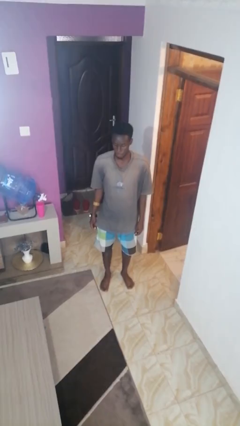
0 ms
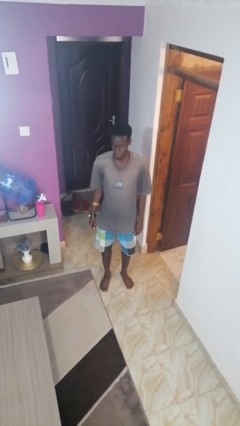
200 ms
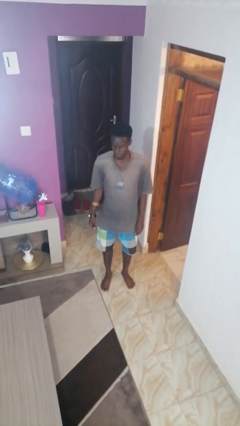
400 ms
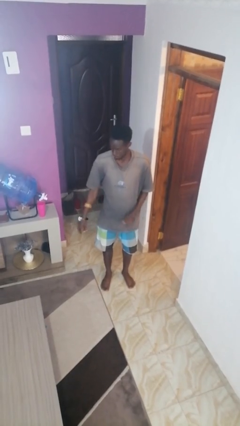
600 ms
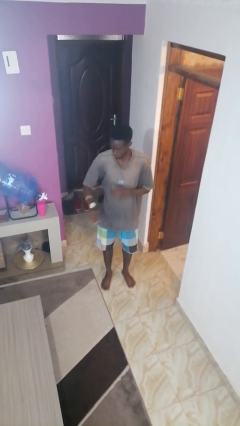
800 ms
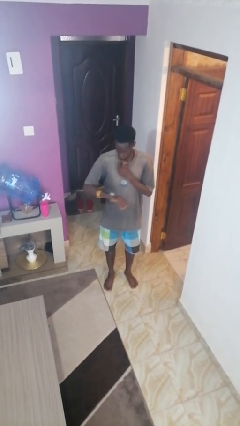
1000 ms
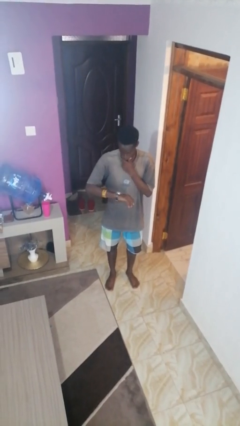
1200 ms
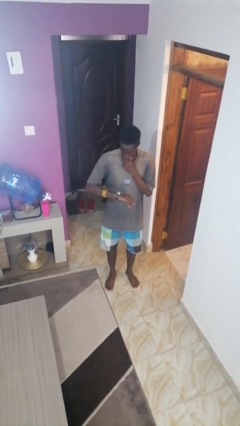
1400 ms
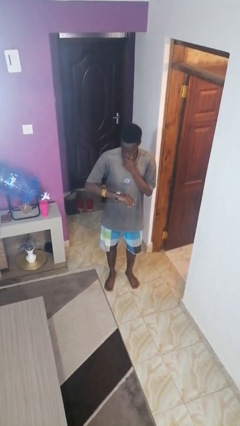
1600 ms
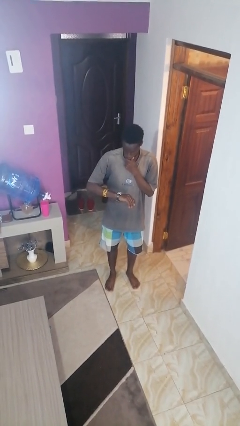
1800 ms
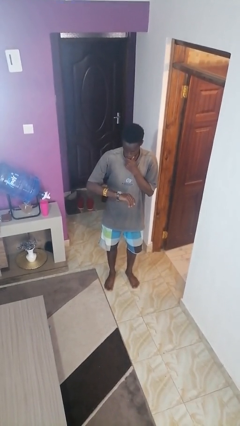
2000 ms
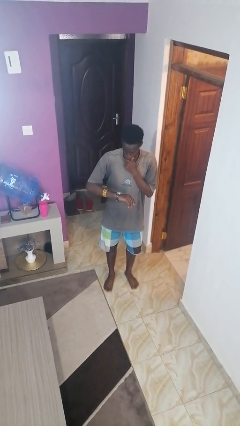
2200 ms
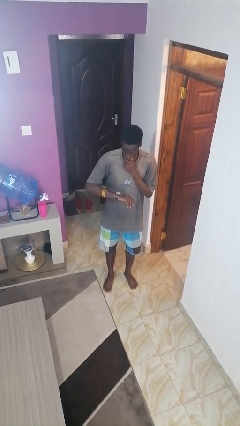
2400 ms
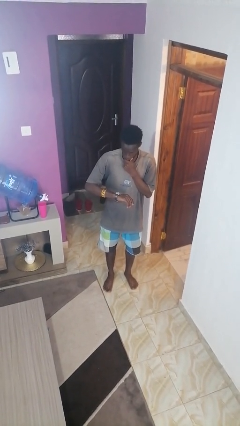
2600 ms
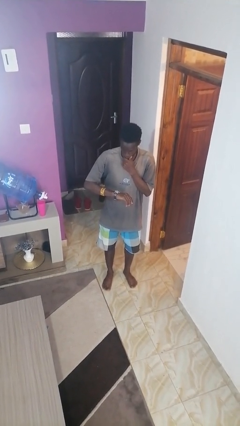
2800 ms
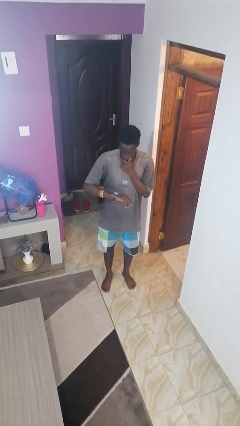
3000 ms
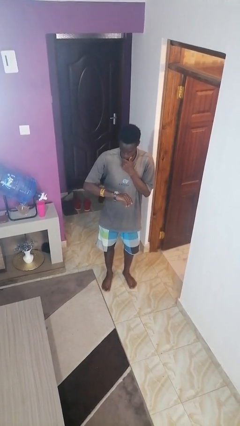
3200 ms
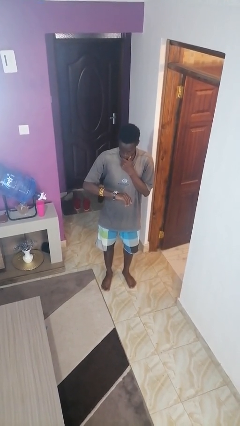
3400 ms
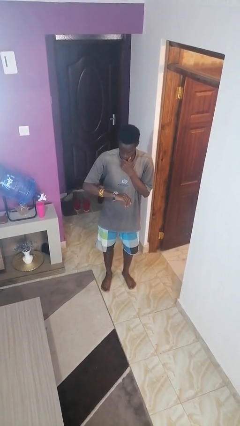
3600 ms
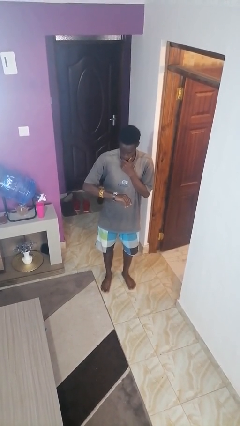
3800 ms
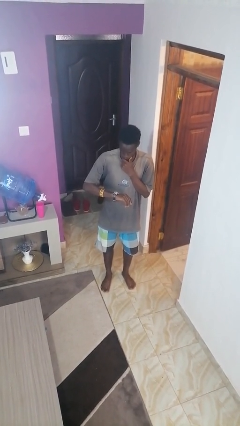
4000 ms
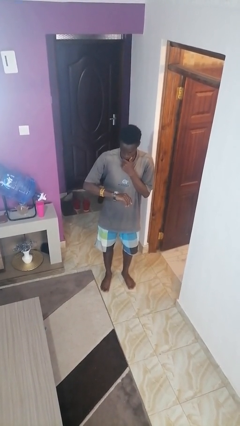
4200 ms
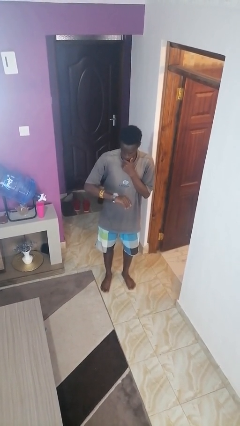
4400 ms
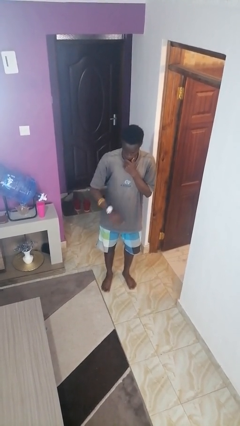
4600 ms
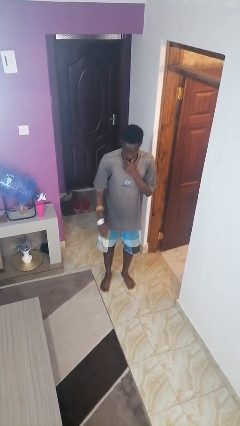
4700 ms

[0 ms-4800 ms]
person looks at wristwatch

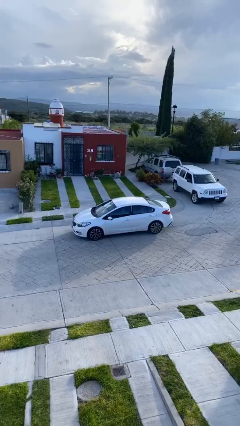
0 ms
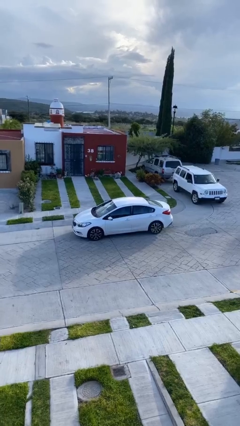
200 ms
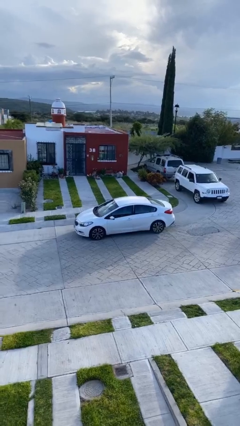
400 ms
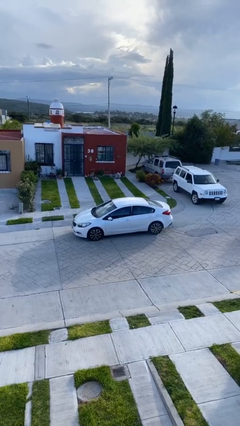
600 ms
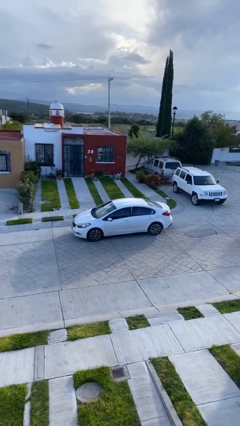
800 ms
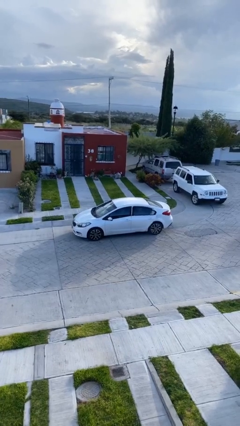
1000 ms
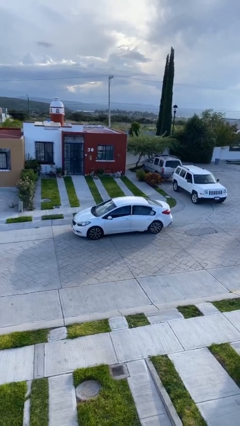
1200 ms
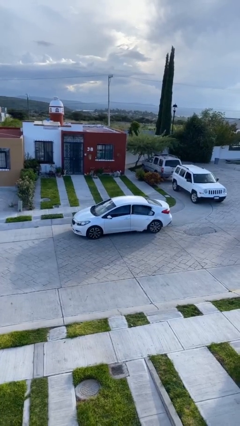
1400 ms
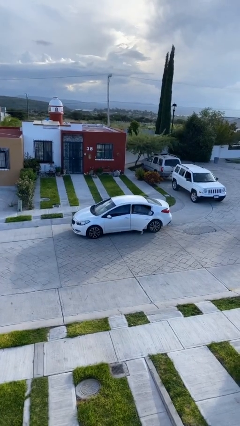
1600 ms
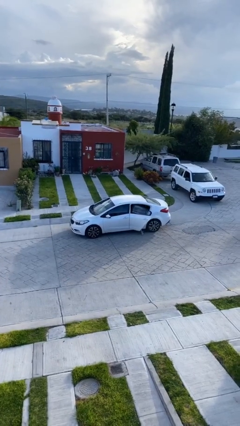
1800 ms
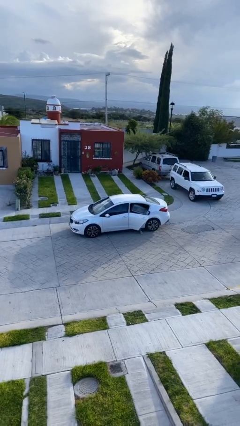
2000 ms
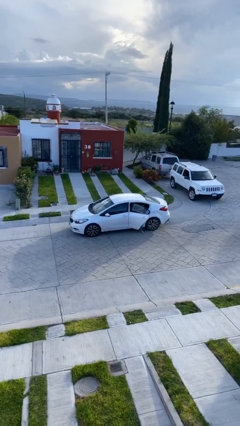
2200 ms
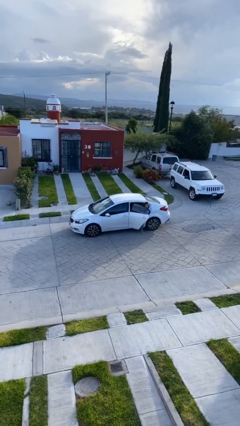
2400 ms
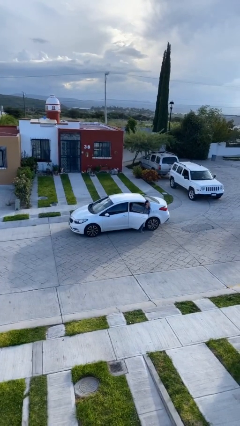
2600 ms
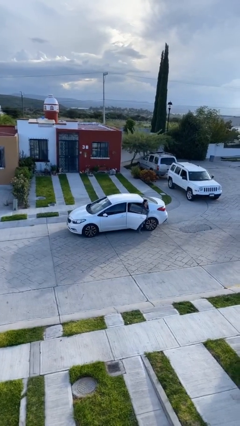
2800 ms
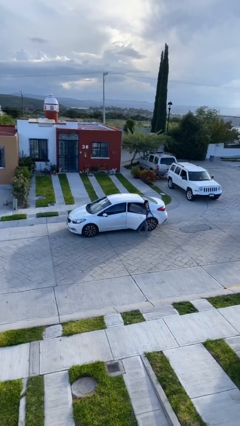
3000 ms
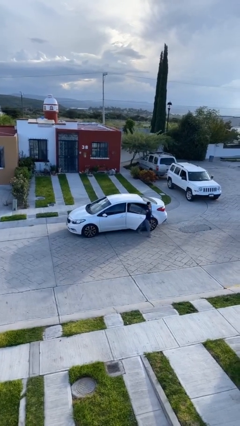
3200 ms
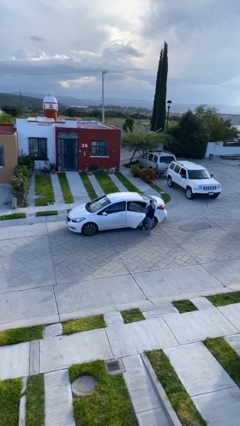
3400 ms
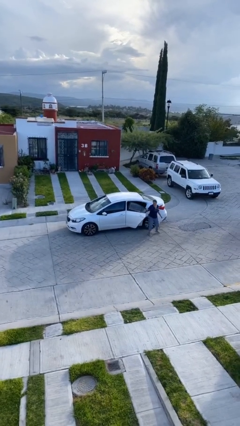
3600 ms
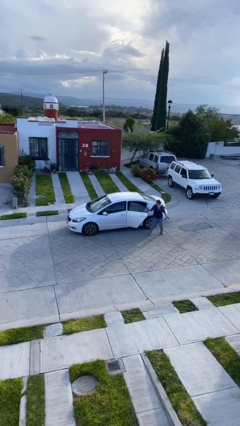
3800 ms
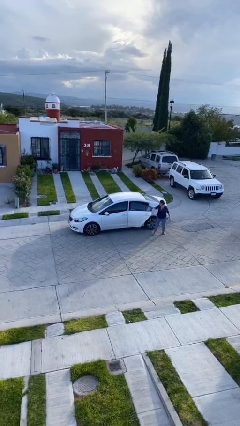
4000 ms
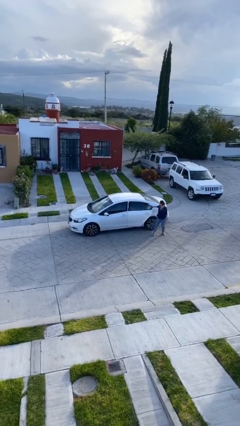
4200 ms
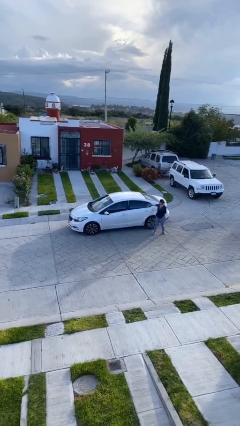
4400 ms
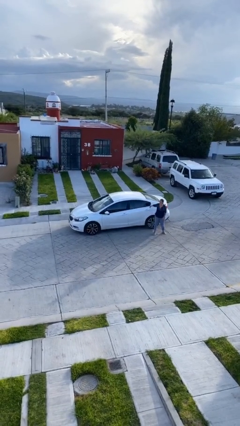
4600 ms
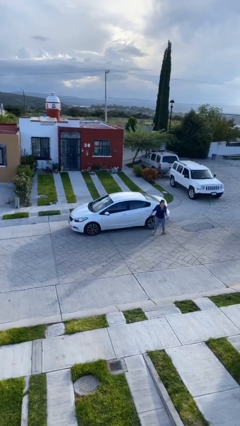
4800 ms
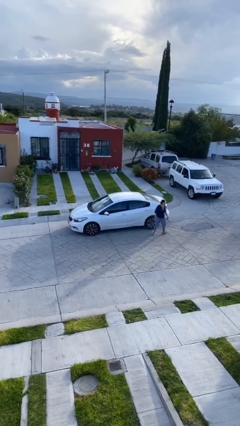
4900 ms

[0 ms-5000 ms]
car drops off person

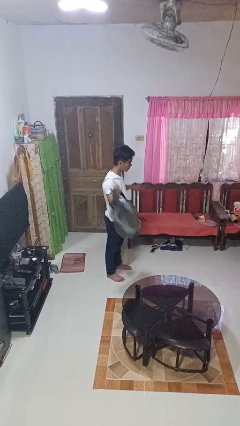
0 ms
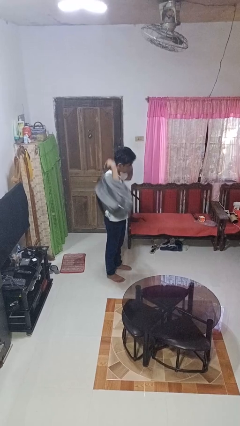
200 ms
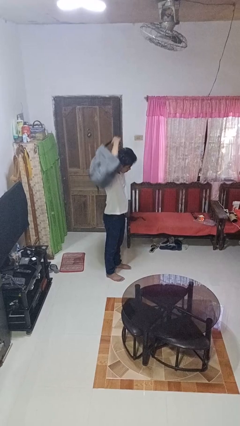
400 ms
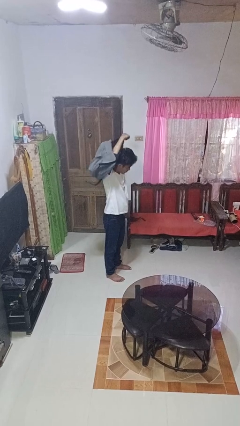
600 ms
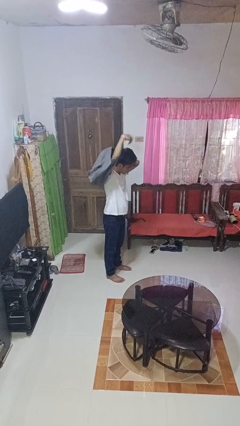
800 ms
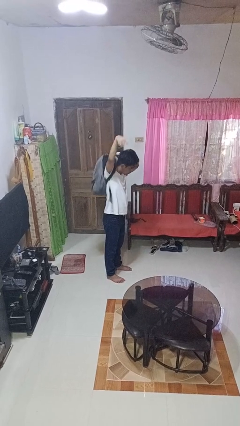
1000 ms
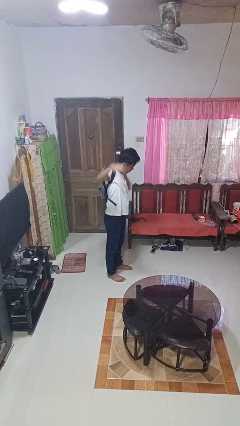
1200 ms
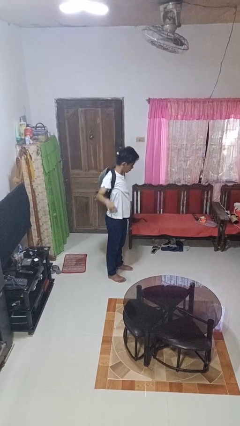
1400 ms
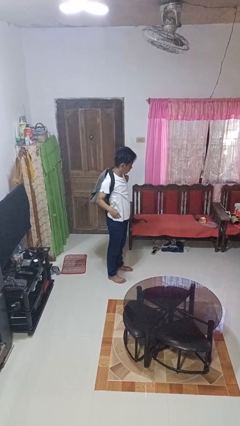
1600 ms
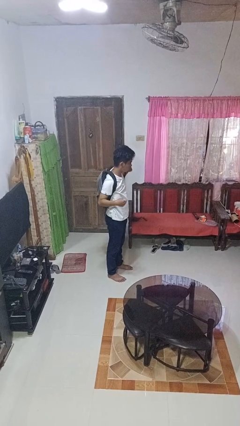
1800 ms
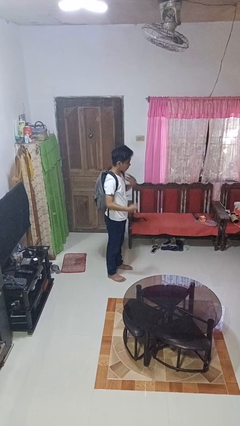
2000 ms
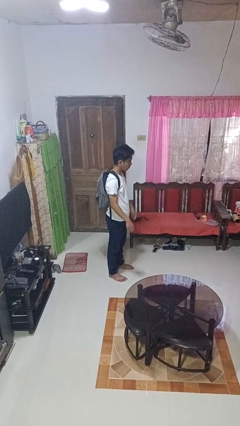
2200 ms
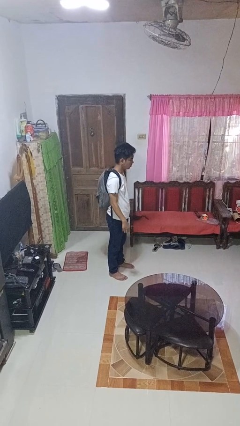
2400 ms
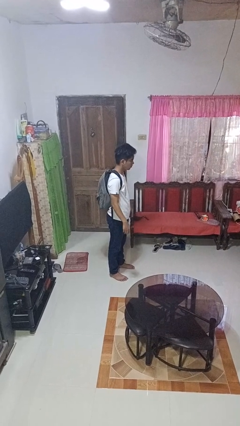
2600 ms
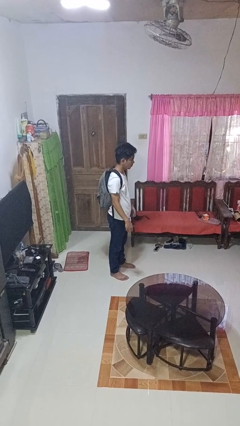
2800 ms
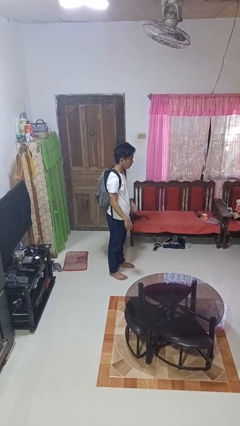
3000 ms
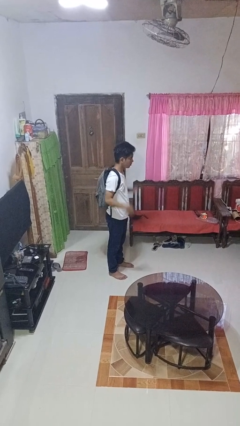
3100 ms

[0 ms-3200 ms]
person puts on backpack

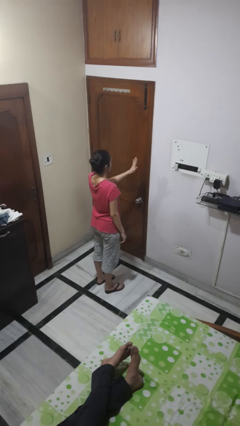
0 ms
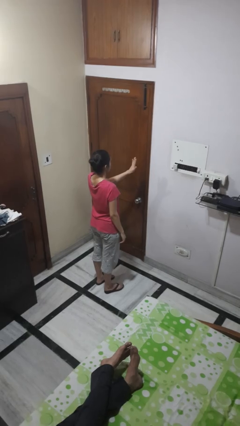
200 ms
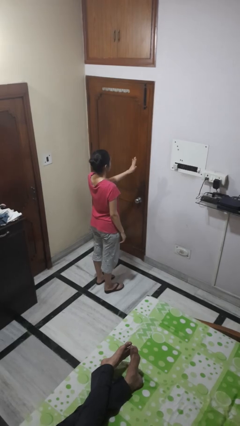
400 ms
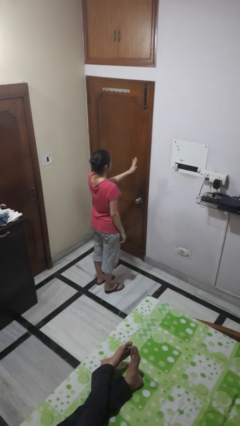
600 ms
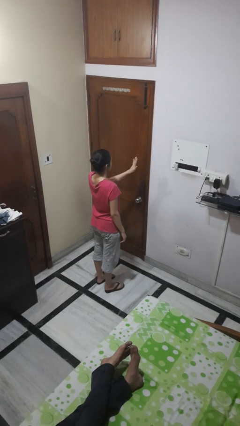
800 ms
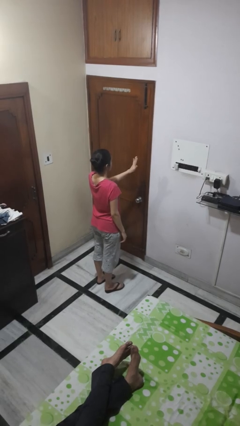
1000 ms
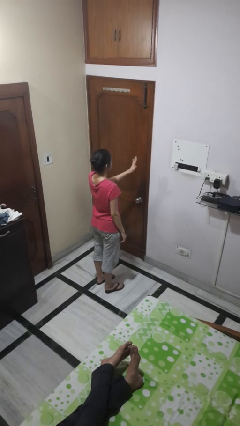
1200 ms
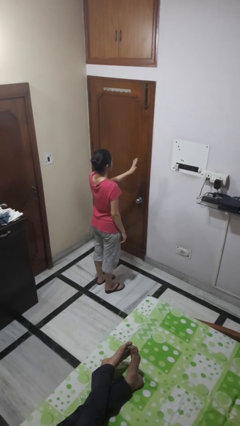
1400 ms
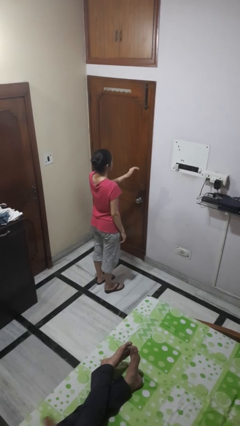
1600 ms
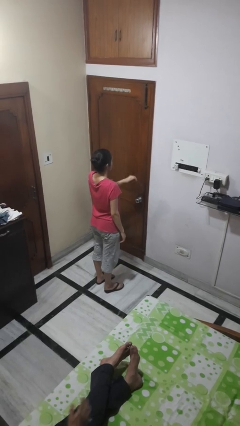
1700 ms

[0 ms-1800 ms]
person gestures stop

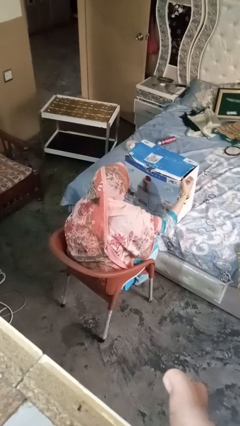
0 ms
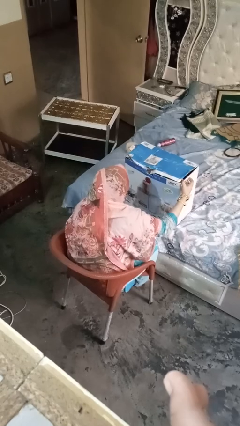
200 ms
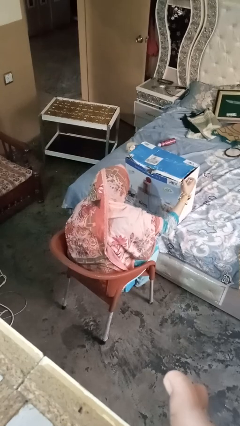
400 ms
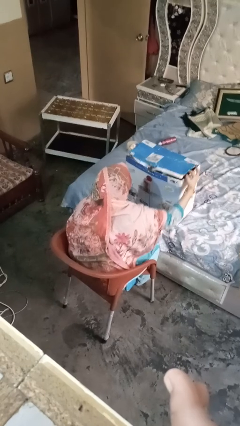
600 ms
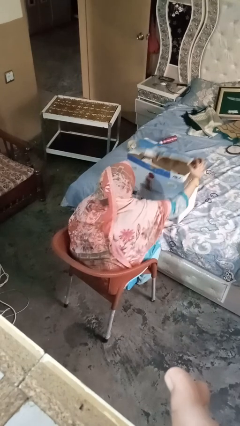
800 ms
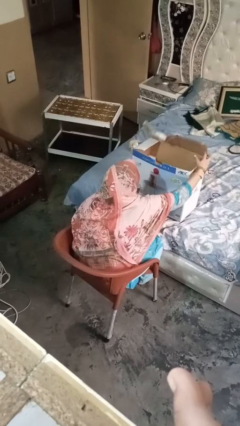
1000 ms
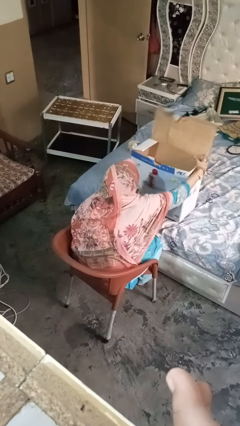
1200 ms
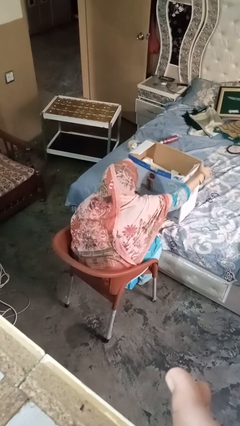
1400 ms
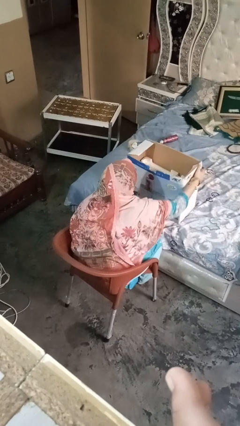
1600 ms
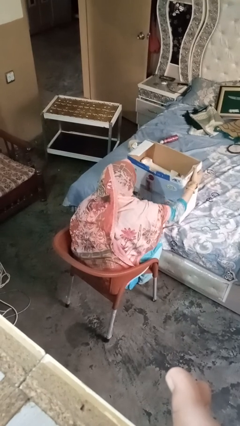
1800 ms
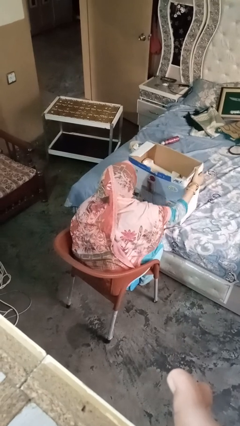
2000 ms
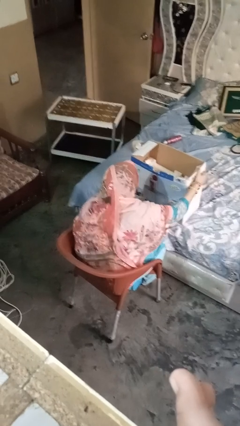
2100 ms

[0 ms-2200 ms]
person opens box

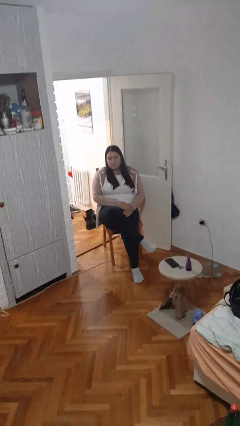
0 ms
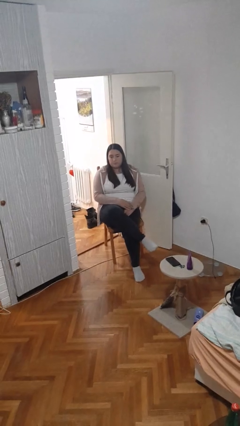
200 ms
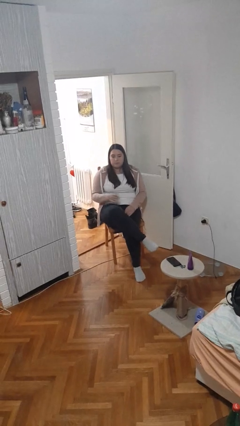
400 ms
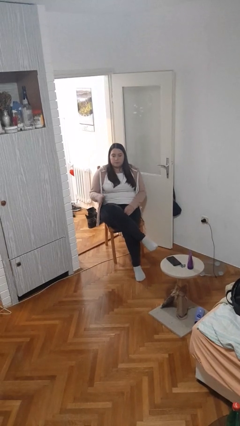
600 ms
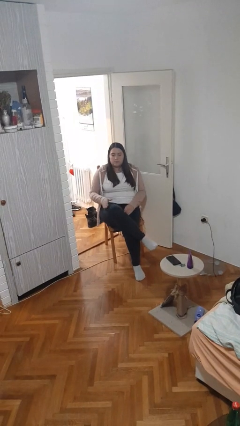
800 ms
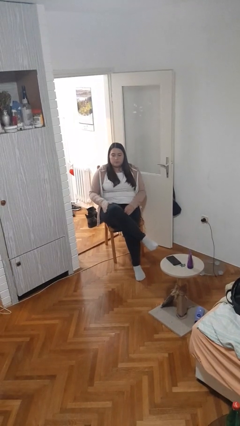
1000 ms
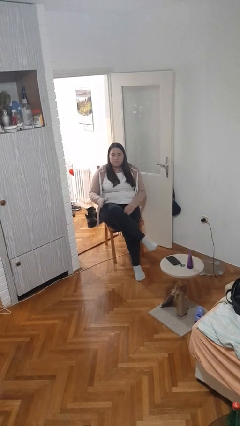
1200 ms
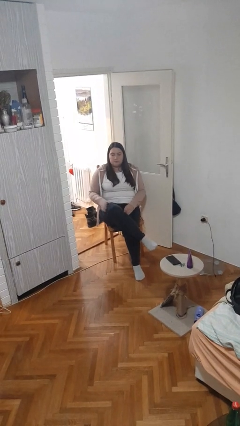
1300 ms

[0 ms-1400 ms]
person slaps hands on thighs
